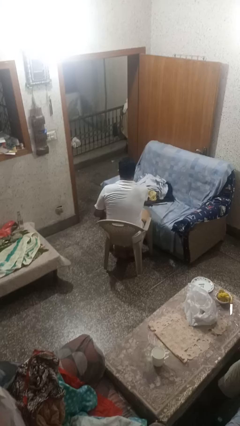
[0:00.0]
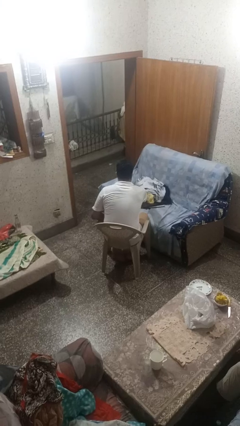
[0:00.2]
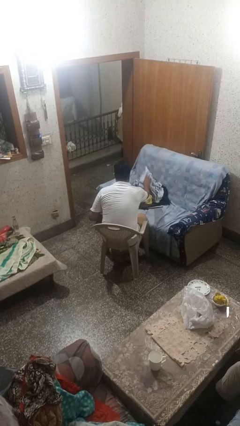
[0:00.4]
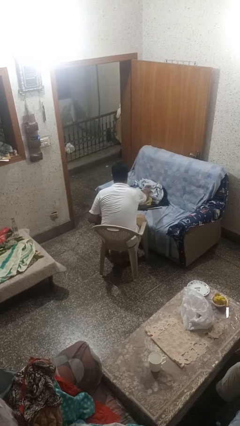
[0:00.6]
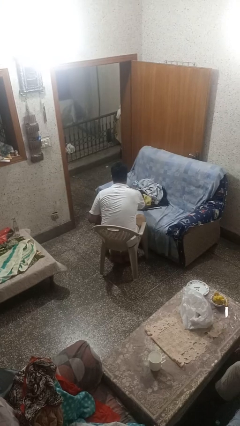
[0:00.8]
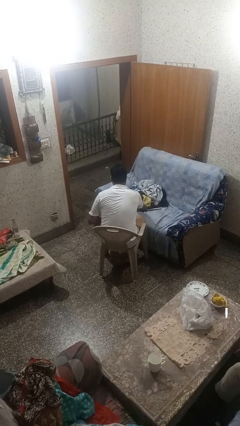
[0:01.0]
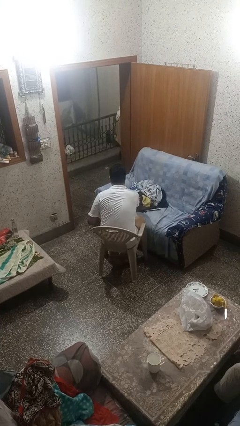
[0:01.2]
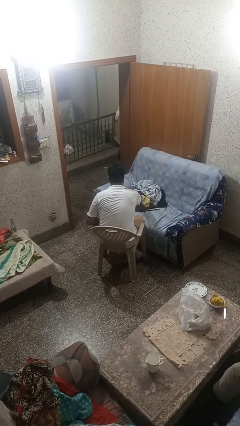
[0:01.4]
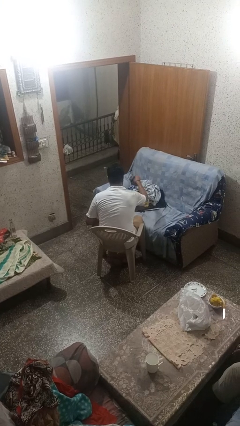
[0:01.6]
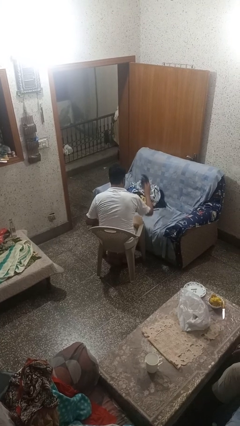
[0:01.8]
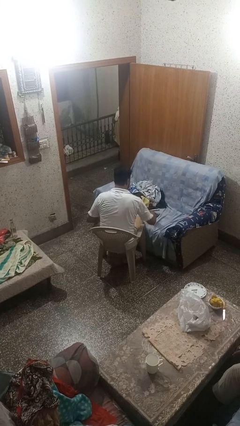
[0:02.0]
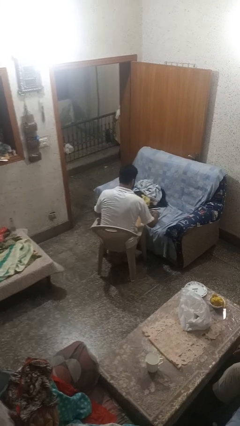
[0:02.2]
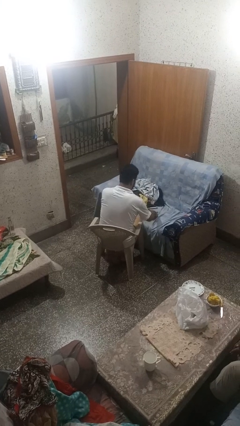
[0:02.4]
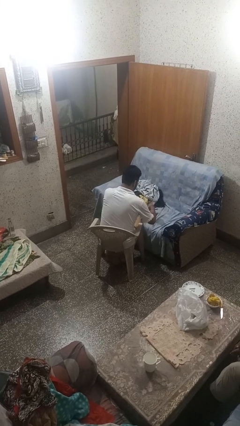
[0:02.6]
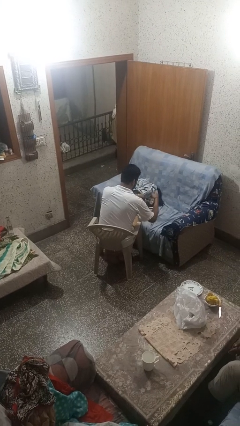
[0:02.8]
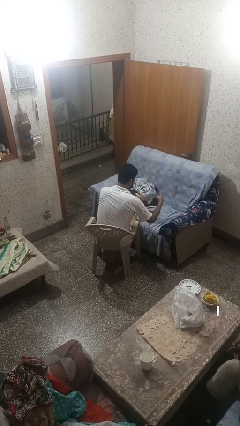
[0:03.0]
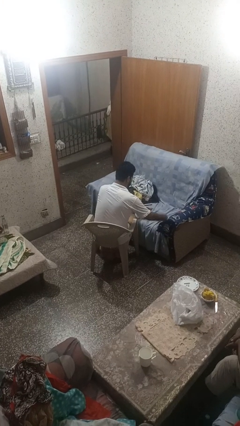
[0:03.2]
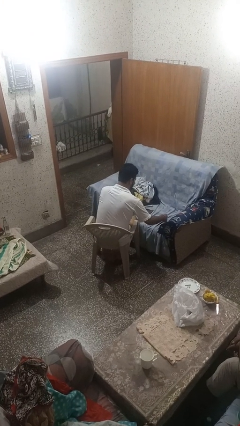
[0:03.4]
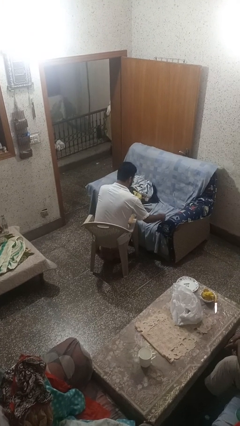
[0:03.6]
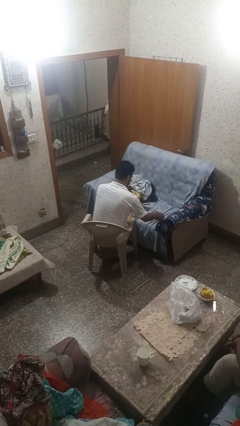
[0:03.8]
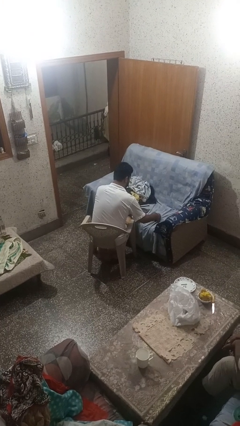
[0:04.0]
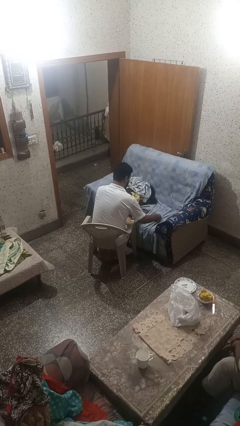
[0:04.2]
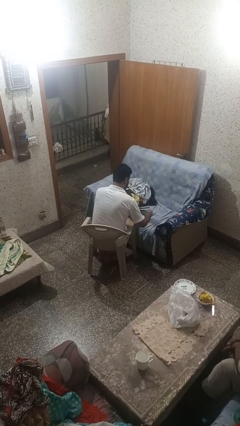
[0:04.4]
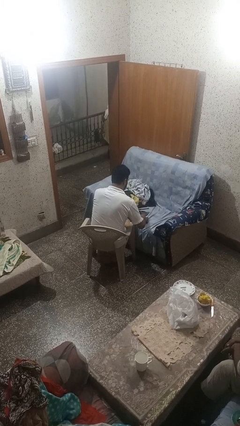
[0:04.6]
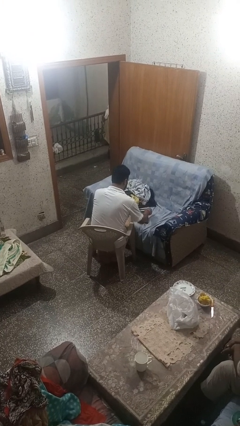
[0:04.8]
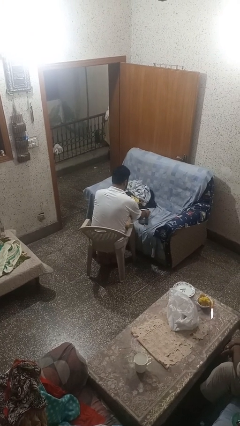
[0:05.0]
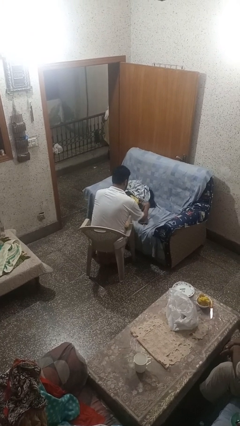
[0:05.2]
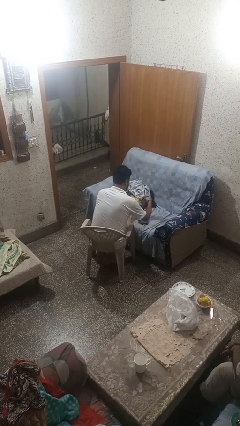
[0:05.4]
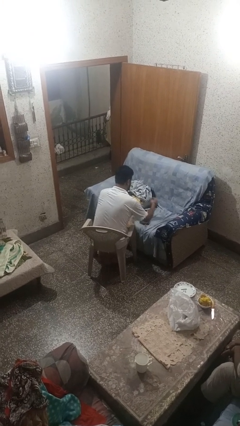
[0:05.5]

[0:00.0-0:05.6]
person folds socks

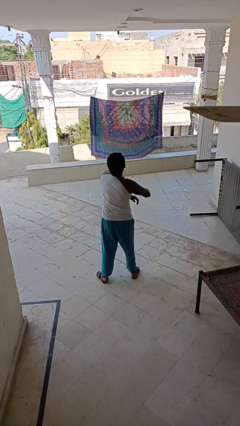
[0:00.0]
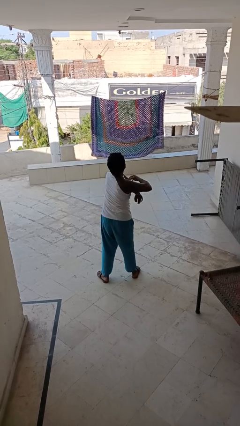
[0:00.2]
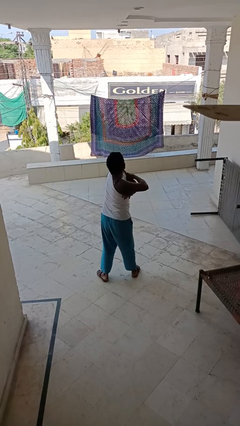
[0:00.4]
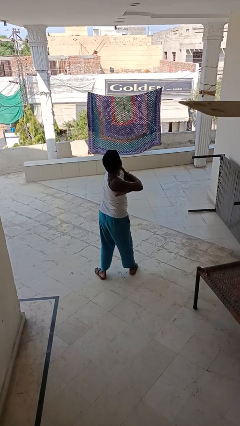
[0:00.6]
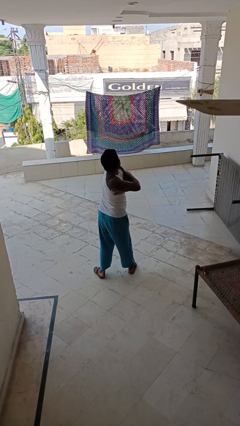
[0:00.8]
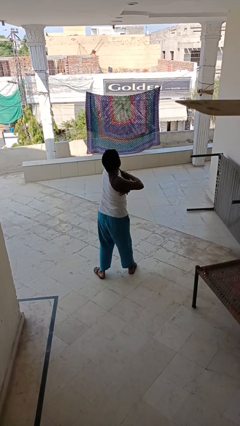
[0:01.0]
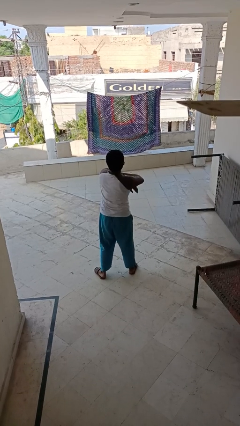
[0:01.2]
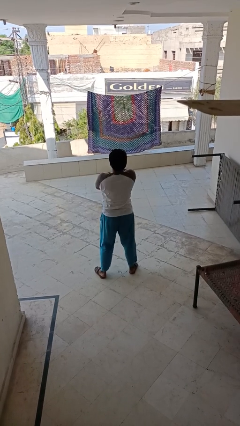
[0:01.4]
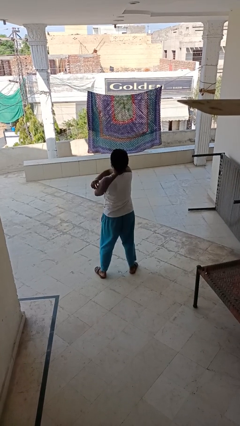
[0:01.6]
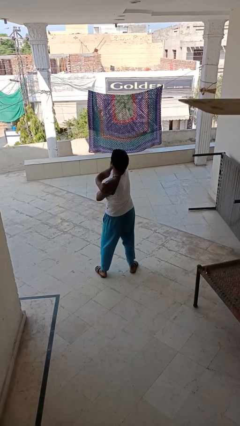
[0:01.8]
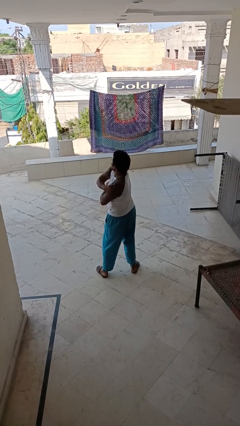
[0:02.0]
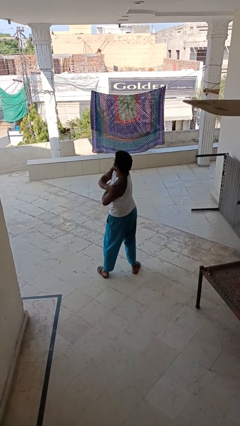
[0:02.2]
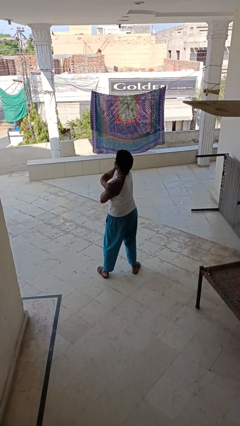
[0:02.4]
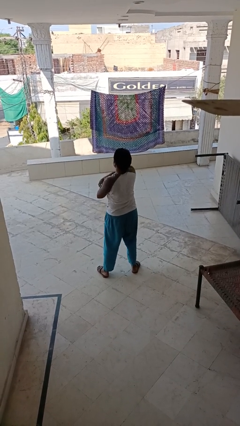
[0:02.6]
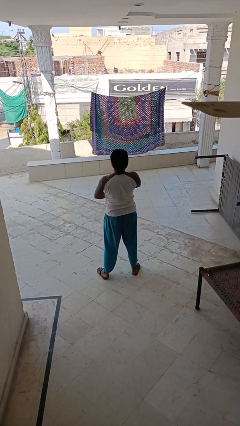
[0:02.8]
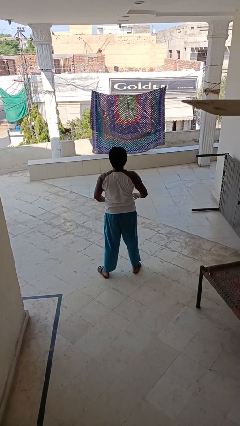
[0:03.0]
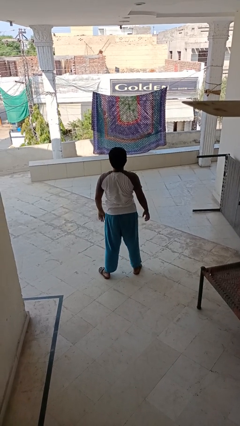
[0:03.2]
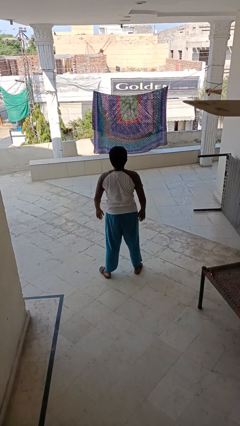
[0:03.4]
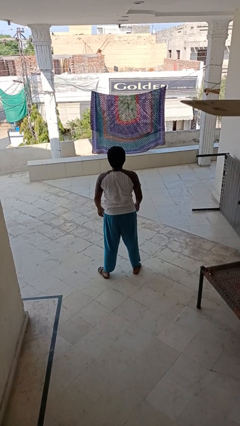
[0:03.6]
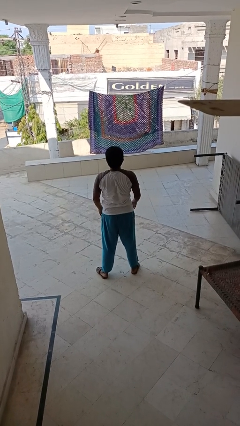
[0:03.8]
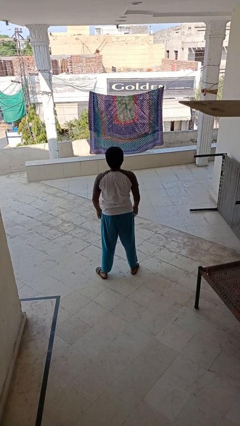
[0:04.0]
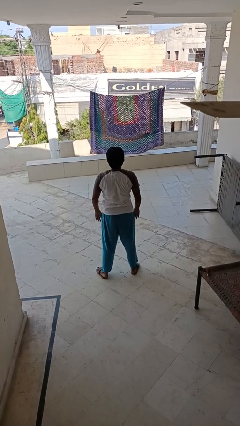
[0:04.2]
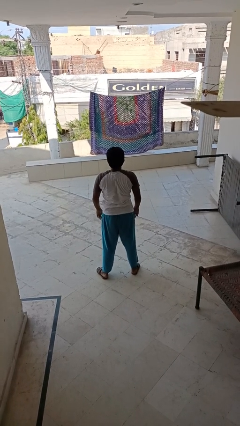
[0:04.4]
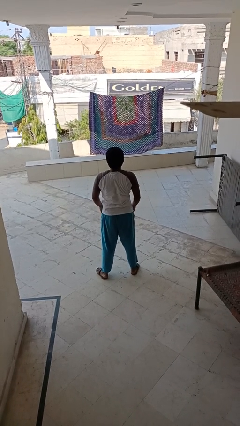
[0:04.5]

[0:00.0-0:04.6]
person stretches arms to side

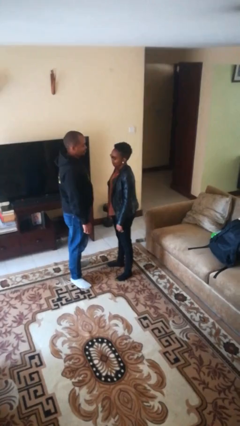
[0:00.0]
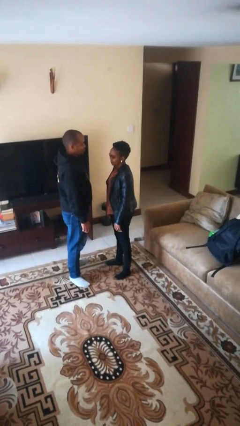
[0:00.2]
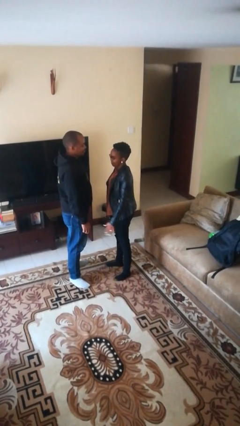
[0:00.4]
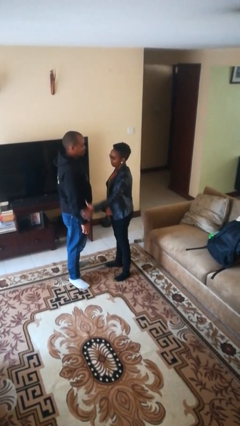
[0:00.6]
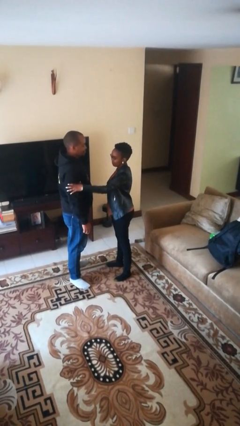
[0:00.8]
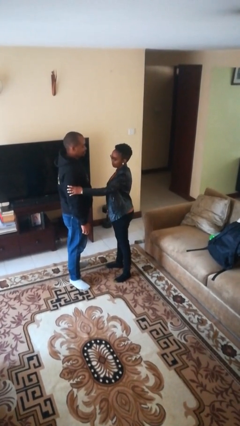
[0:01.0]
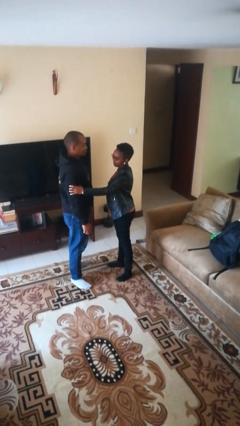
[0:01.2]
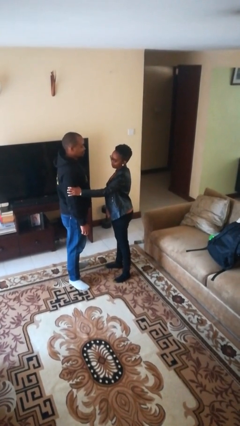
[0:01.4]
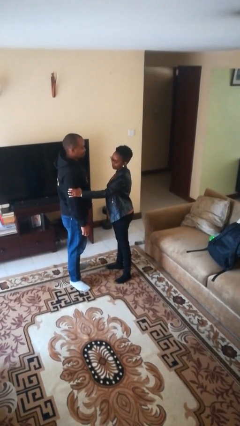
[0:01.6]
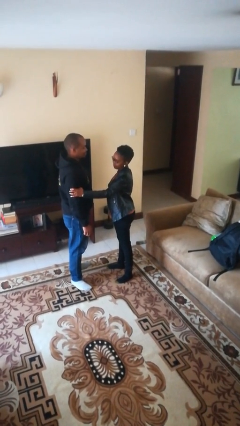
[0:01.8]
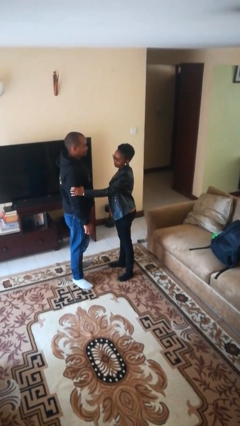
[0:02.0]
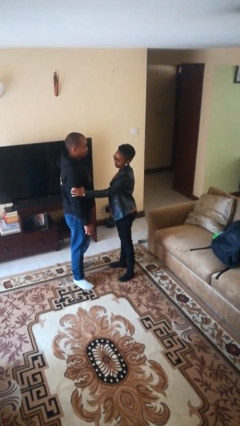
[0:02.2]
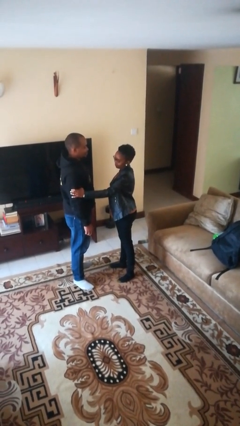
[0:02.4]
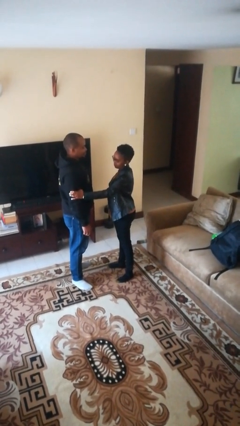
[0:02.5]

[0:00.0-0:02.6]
person grabs person by bicep

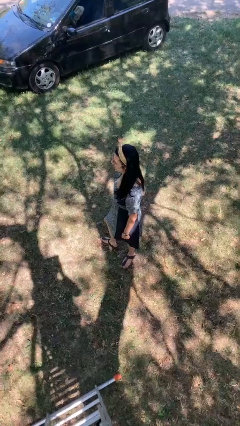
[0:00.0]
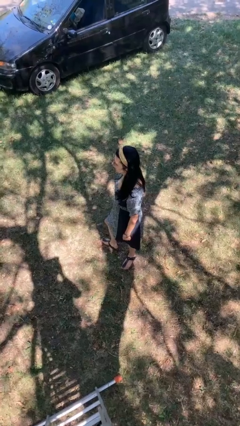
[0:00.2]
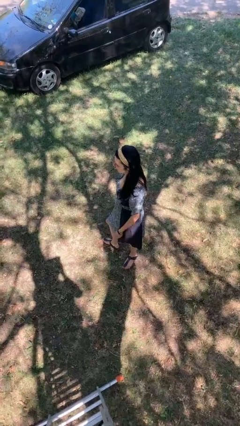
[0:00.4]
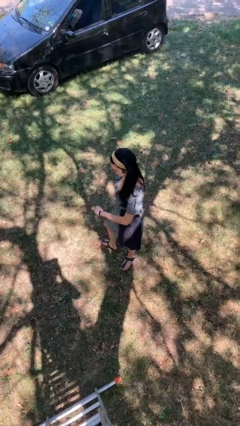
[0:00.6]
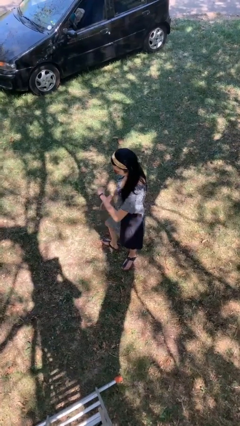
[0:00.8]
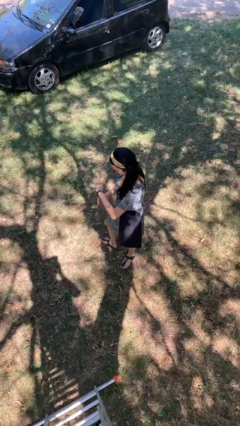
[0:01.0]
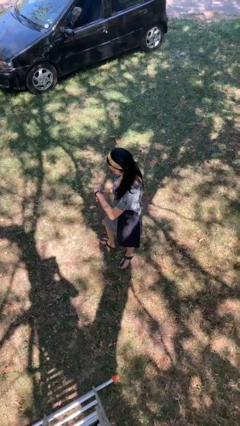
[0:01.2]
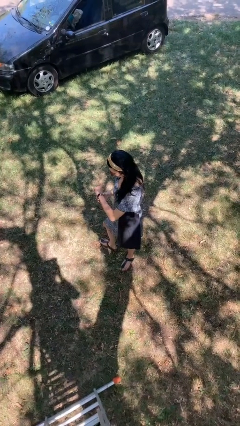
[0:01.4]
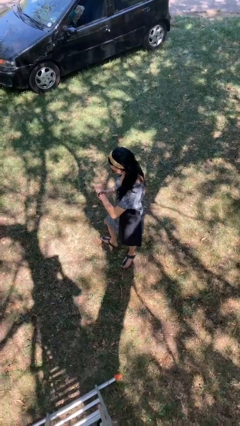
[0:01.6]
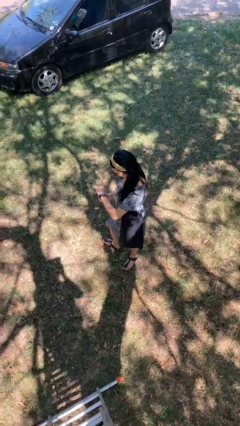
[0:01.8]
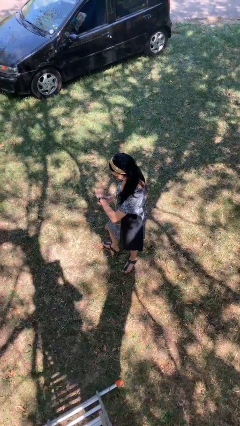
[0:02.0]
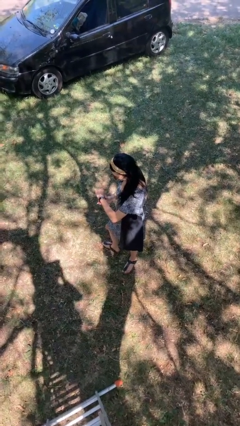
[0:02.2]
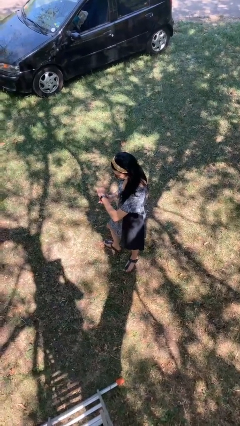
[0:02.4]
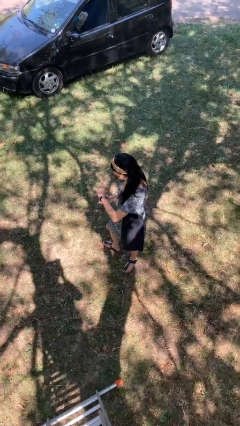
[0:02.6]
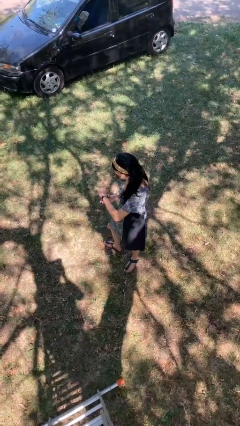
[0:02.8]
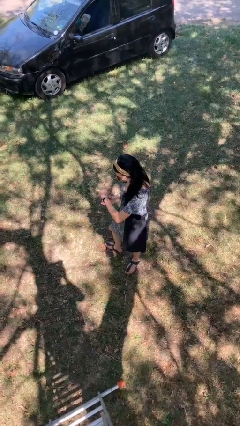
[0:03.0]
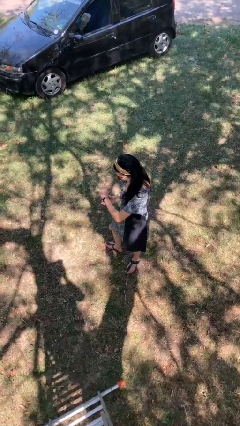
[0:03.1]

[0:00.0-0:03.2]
person looks at wristwatch

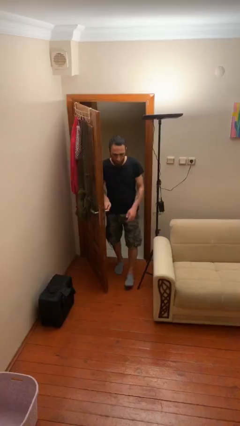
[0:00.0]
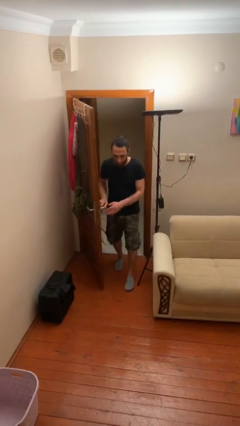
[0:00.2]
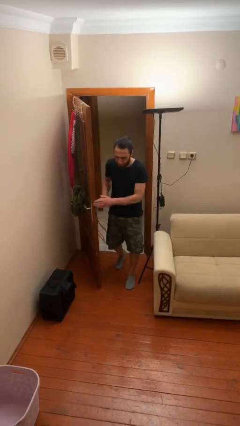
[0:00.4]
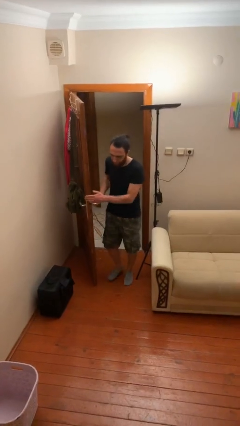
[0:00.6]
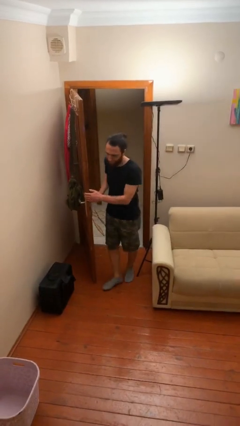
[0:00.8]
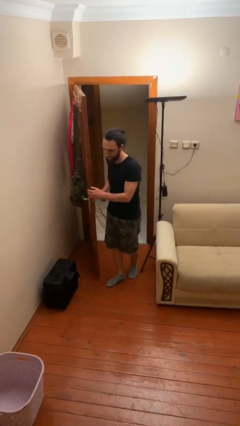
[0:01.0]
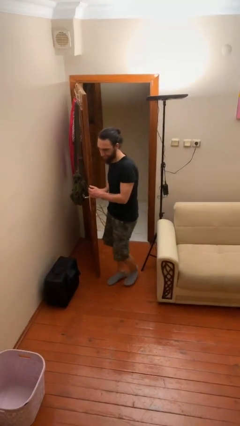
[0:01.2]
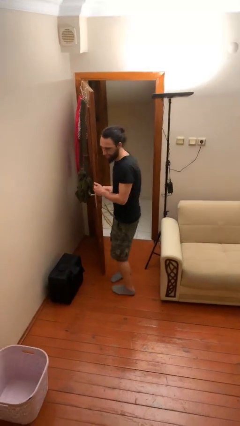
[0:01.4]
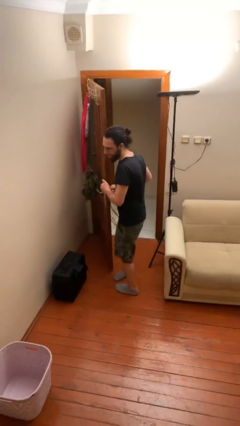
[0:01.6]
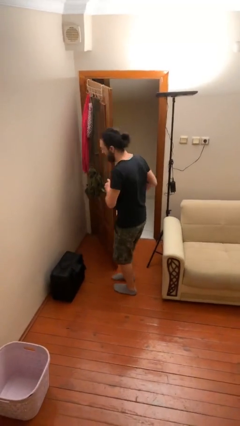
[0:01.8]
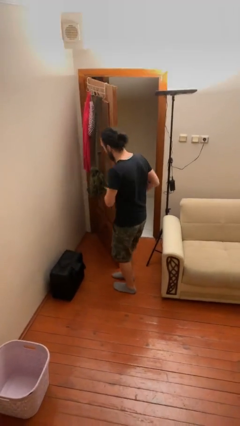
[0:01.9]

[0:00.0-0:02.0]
person enters scene through structure
